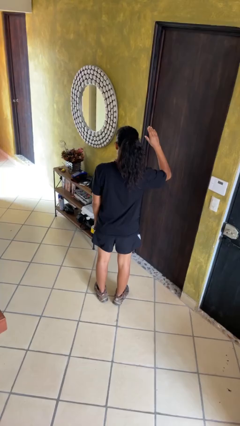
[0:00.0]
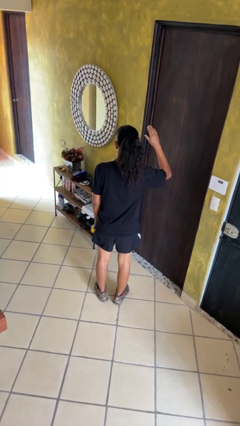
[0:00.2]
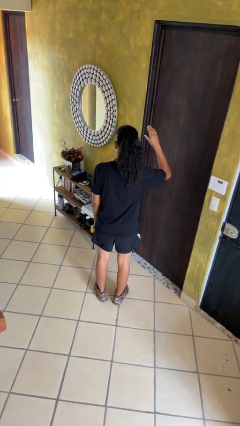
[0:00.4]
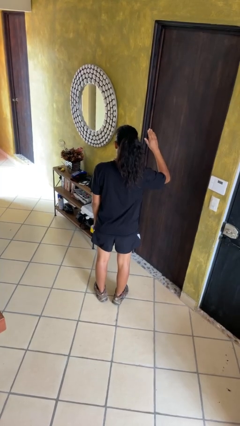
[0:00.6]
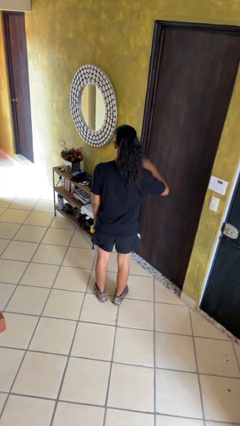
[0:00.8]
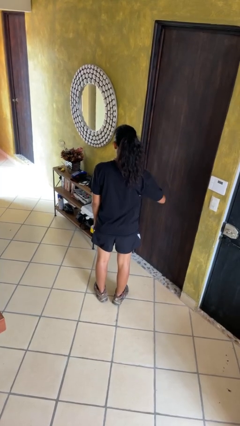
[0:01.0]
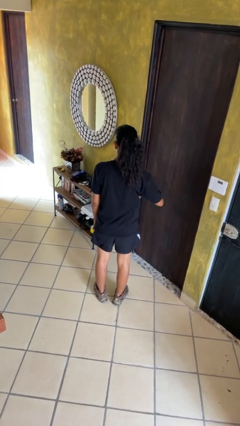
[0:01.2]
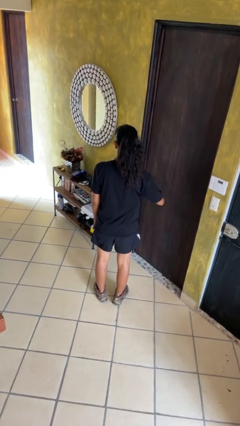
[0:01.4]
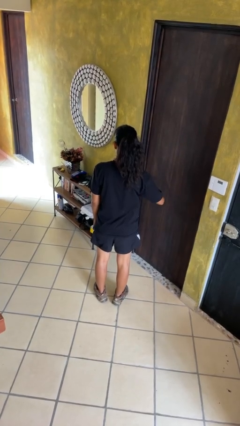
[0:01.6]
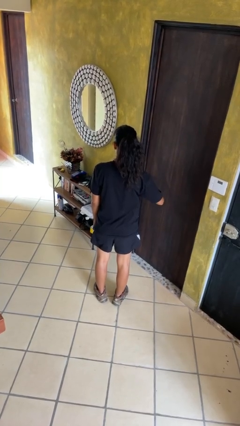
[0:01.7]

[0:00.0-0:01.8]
person gestures swipe down

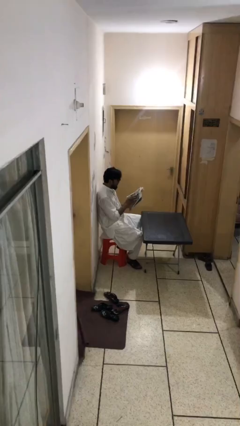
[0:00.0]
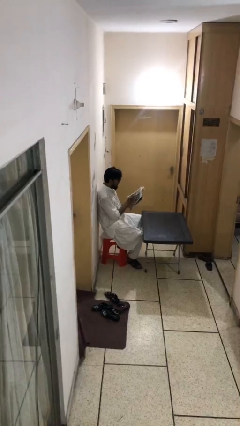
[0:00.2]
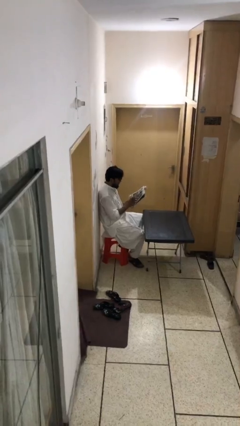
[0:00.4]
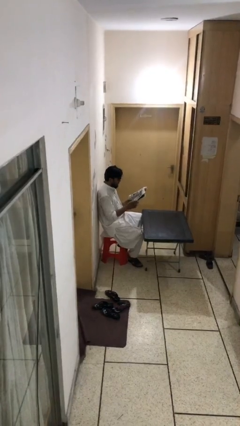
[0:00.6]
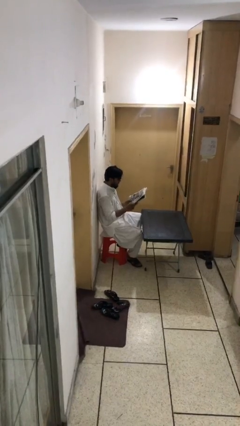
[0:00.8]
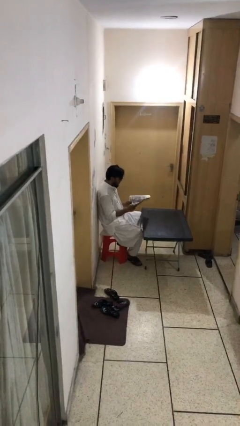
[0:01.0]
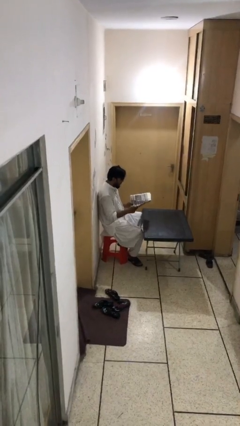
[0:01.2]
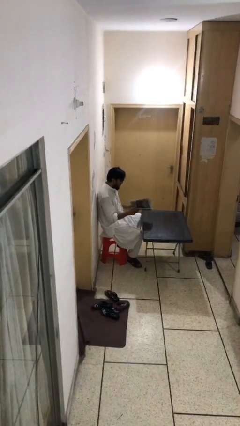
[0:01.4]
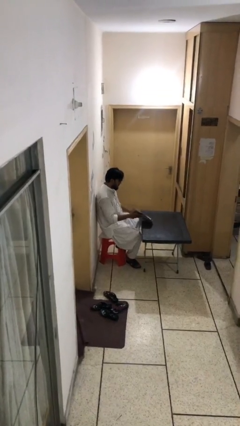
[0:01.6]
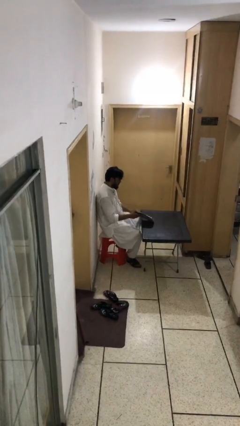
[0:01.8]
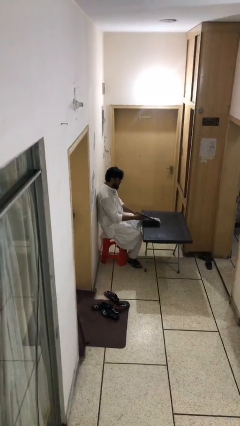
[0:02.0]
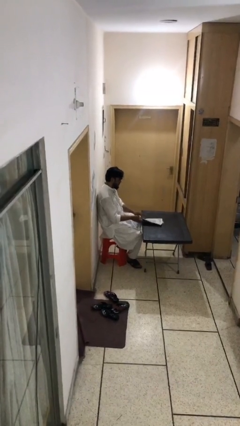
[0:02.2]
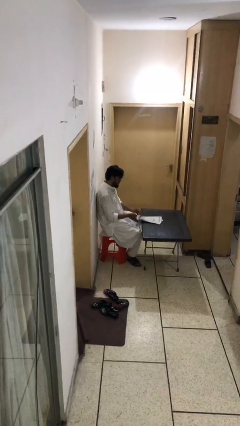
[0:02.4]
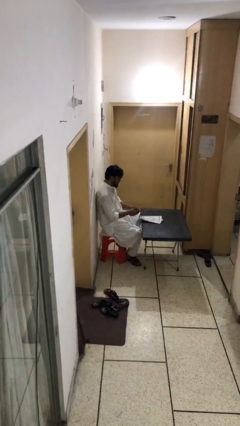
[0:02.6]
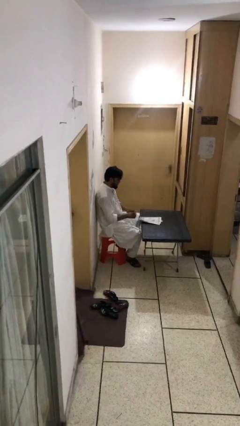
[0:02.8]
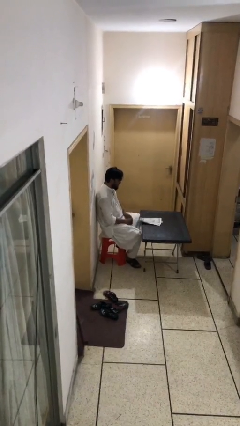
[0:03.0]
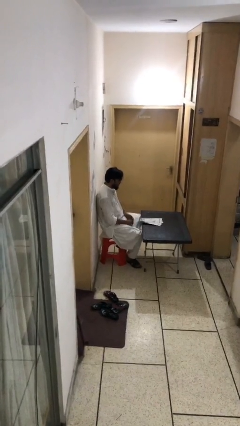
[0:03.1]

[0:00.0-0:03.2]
person puts down object on table

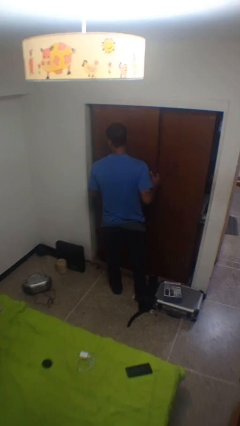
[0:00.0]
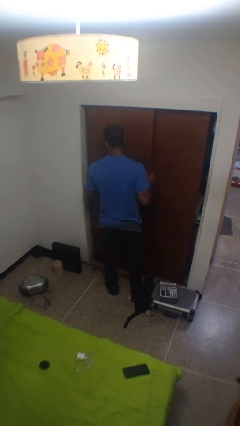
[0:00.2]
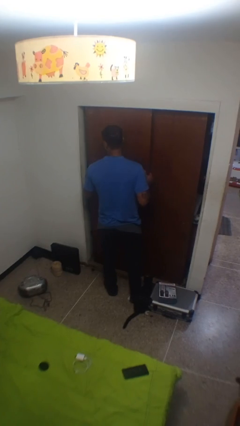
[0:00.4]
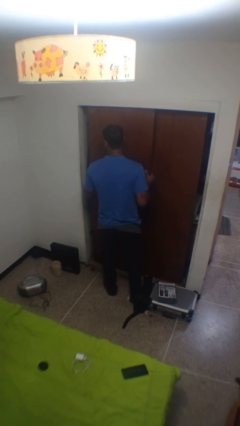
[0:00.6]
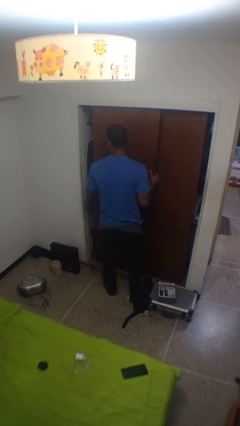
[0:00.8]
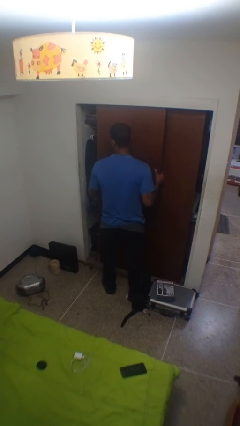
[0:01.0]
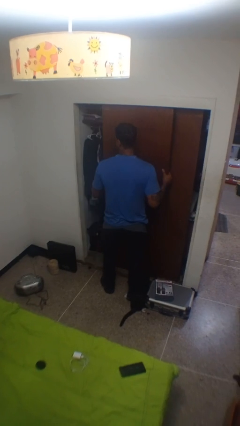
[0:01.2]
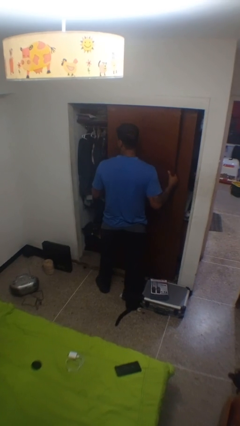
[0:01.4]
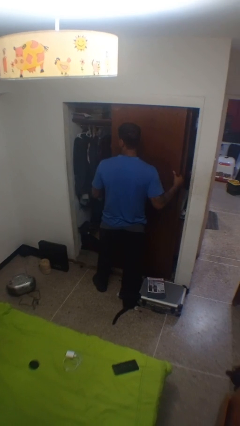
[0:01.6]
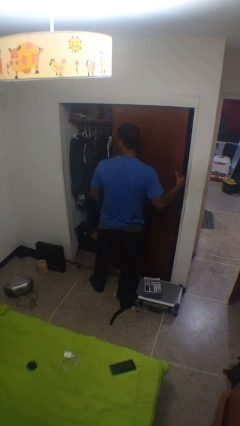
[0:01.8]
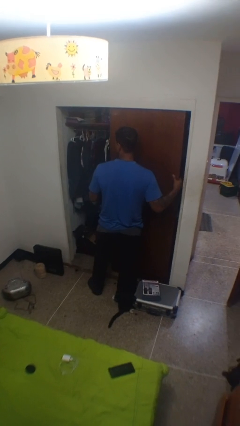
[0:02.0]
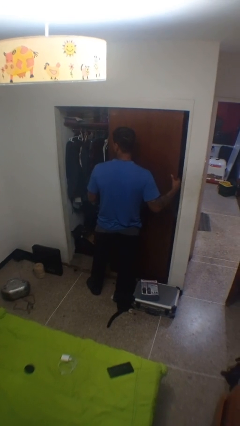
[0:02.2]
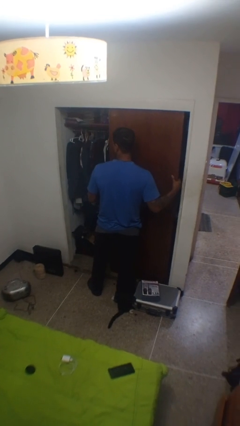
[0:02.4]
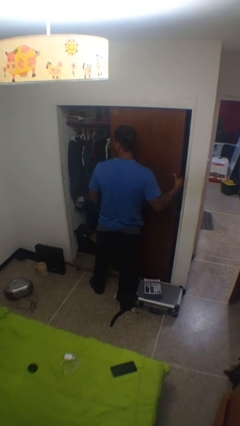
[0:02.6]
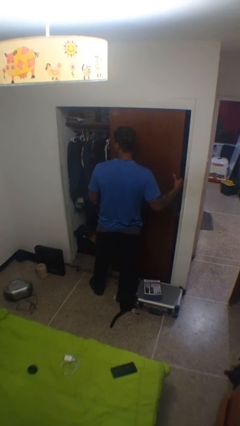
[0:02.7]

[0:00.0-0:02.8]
person opens closet door

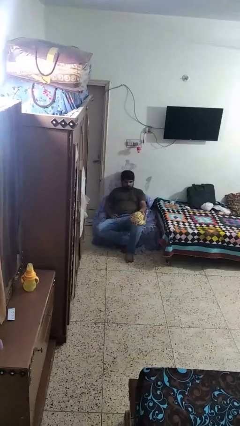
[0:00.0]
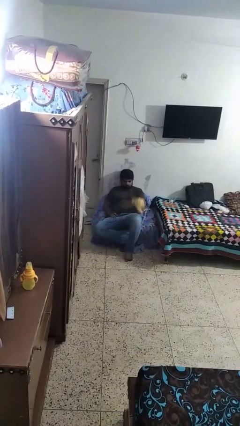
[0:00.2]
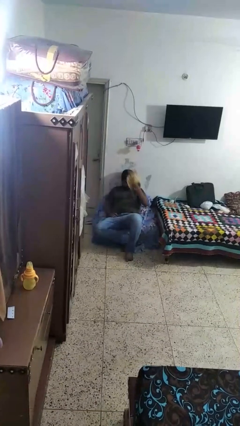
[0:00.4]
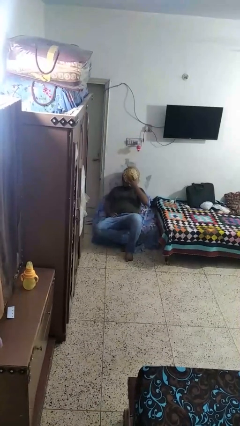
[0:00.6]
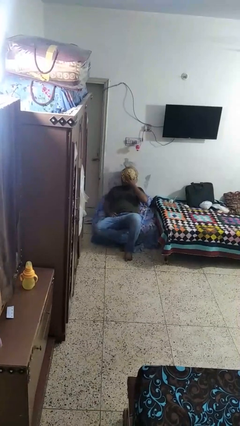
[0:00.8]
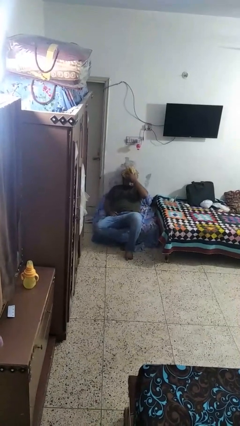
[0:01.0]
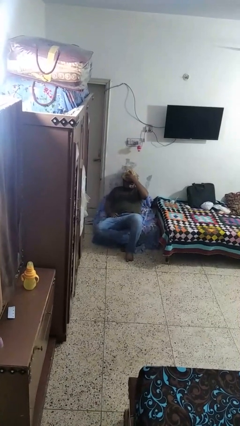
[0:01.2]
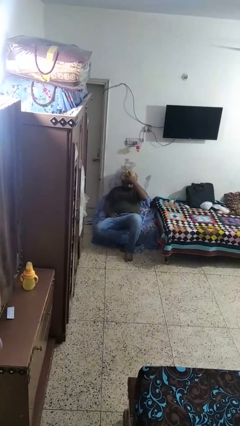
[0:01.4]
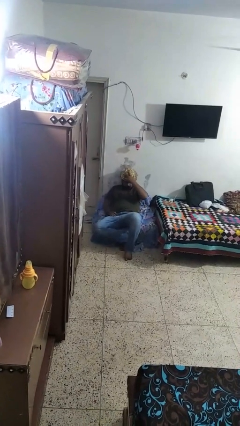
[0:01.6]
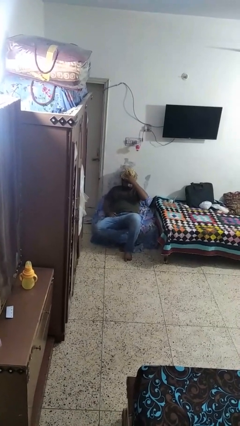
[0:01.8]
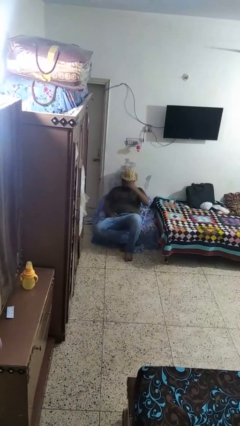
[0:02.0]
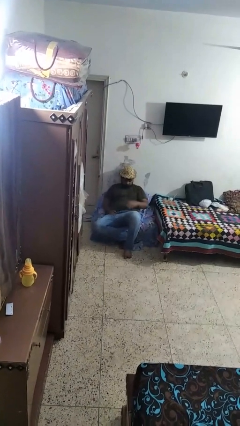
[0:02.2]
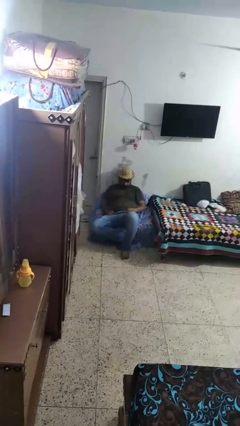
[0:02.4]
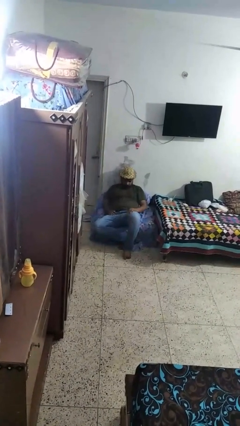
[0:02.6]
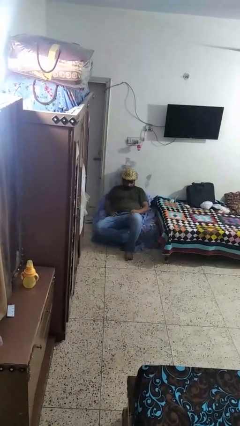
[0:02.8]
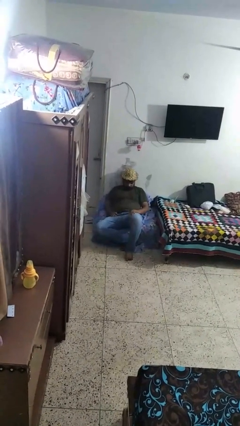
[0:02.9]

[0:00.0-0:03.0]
person puts on hat

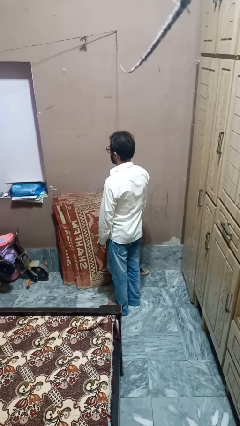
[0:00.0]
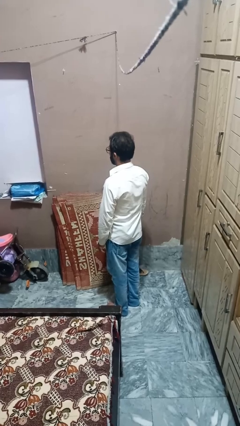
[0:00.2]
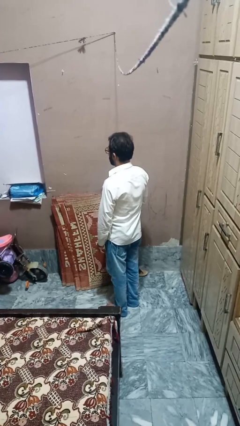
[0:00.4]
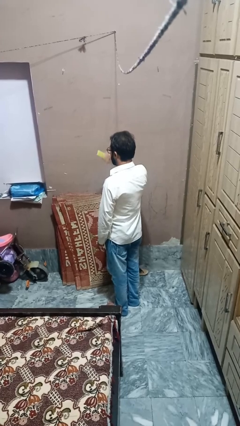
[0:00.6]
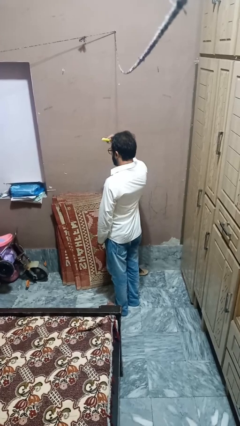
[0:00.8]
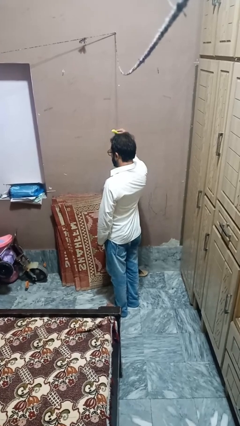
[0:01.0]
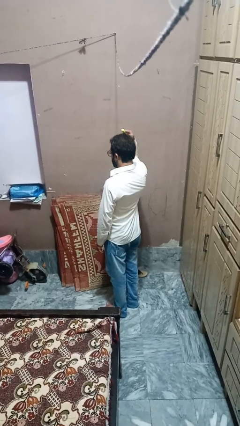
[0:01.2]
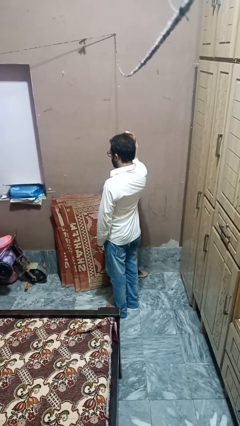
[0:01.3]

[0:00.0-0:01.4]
person brushes hair

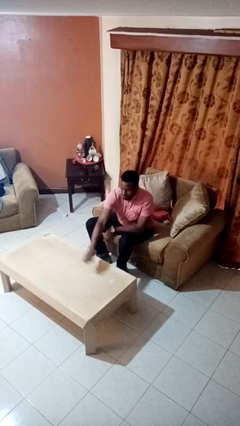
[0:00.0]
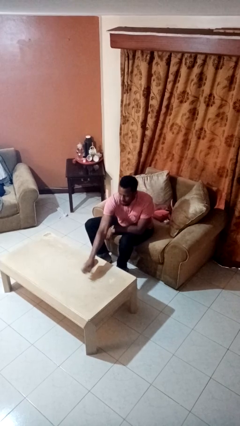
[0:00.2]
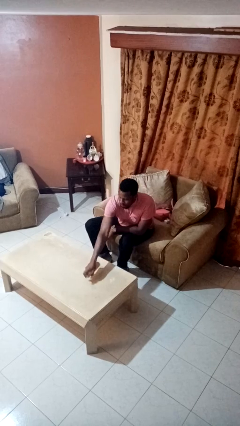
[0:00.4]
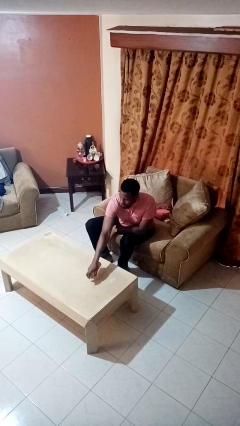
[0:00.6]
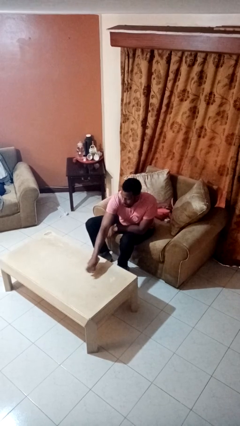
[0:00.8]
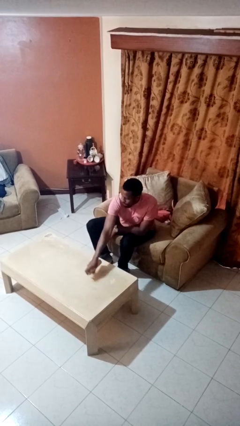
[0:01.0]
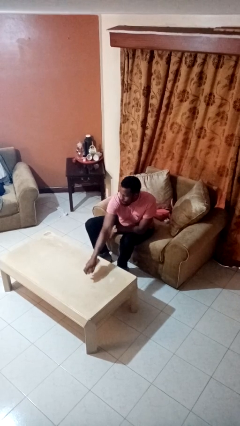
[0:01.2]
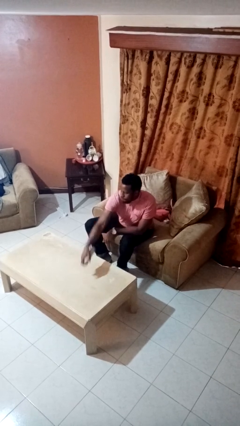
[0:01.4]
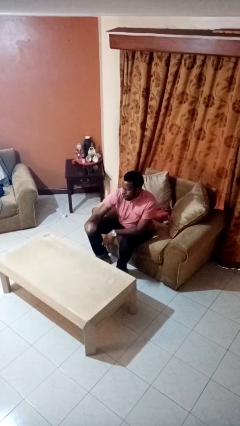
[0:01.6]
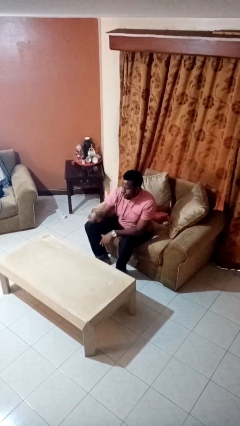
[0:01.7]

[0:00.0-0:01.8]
person sprays from bottle

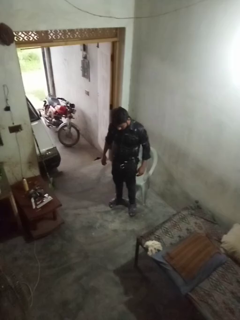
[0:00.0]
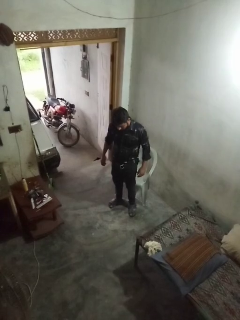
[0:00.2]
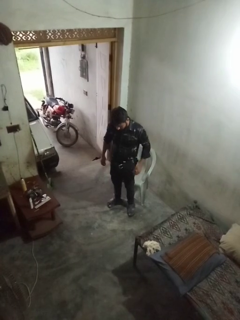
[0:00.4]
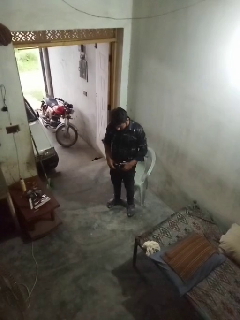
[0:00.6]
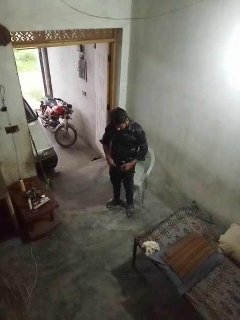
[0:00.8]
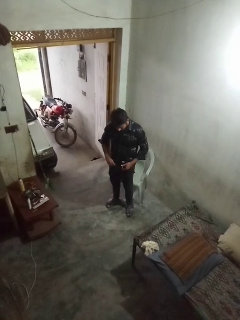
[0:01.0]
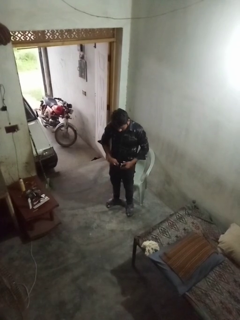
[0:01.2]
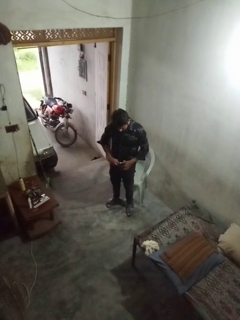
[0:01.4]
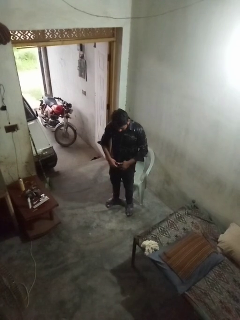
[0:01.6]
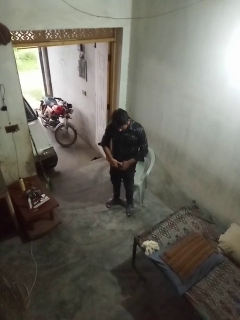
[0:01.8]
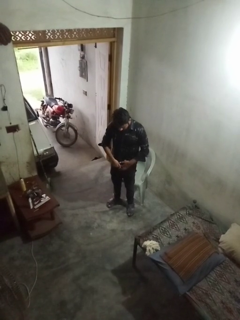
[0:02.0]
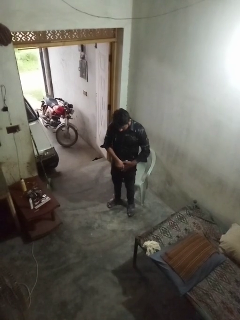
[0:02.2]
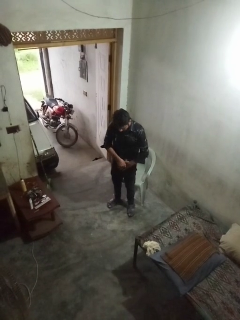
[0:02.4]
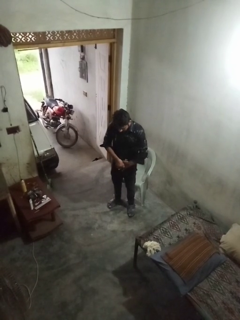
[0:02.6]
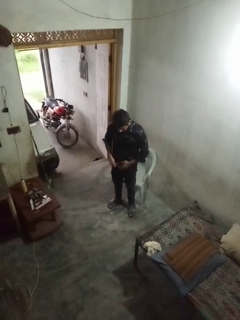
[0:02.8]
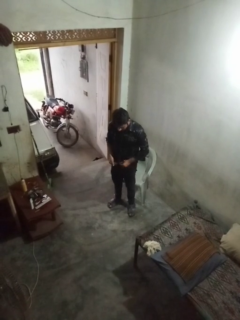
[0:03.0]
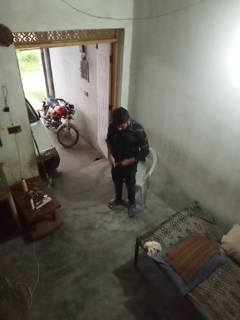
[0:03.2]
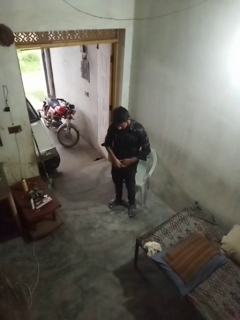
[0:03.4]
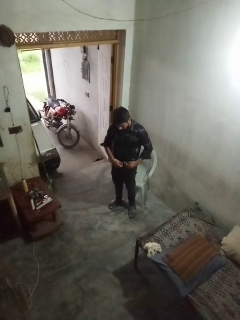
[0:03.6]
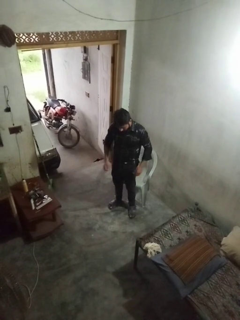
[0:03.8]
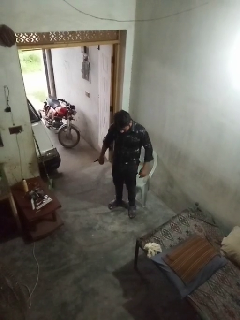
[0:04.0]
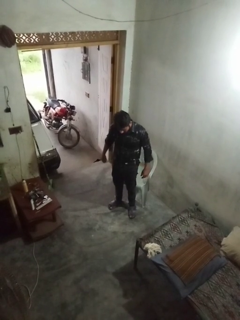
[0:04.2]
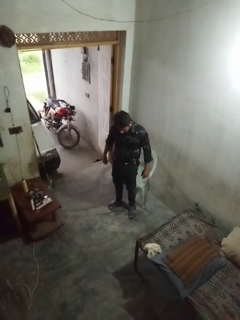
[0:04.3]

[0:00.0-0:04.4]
person puts on belt
